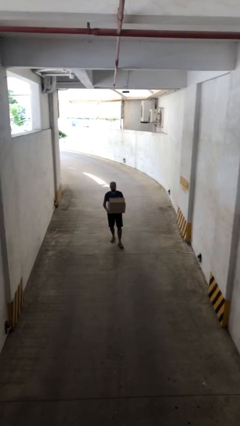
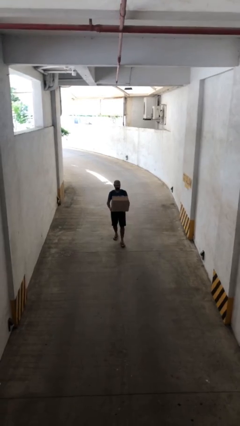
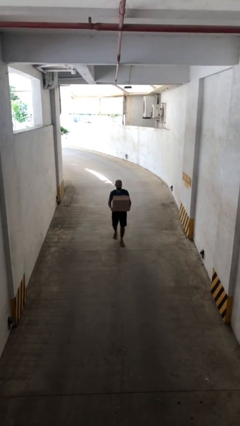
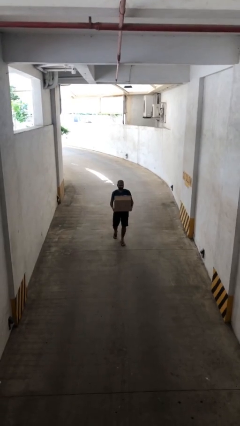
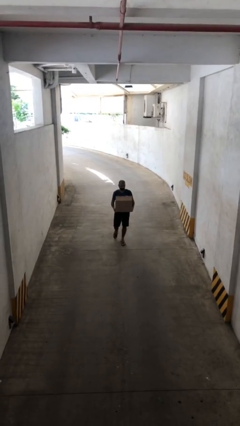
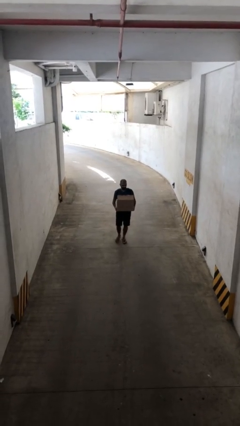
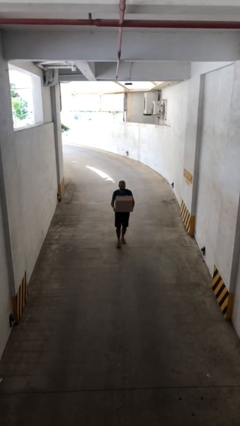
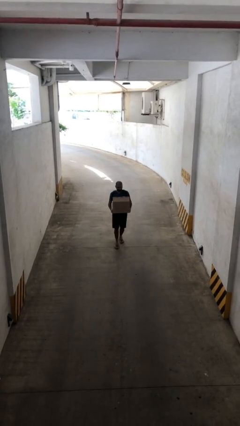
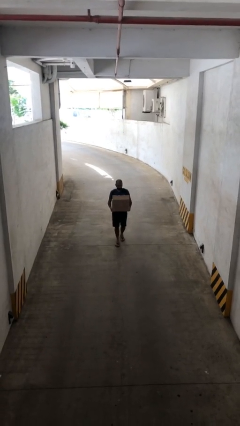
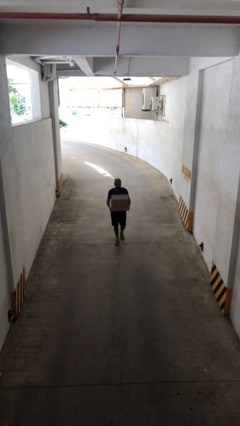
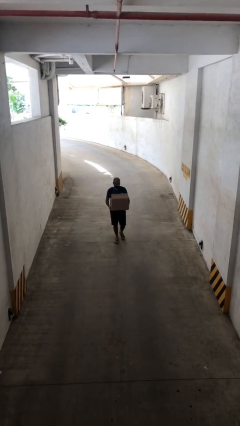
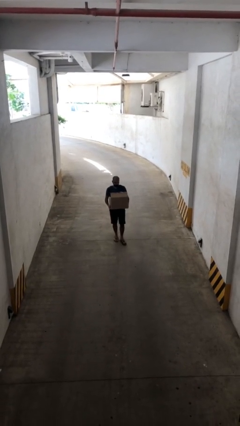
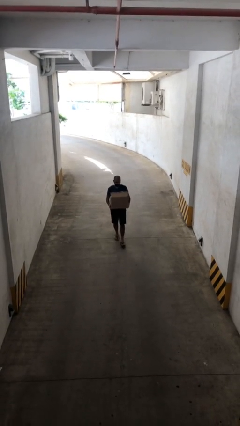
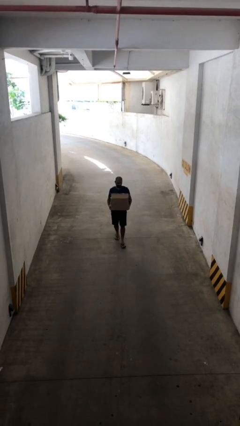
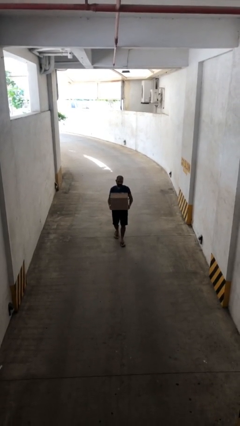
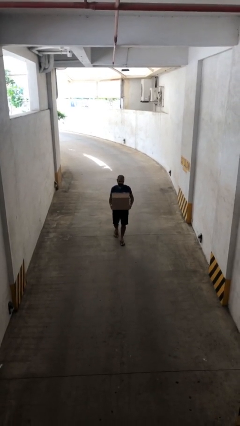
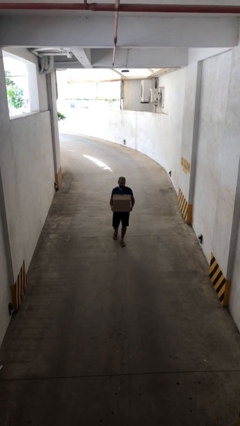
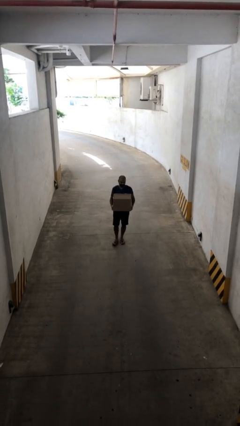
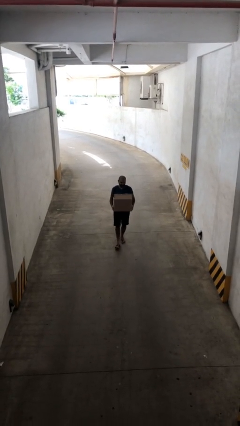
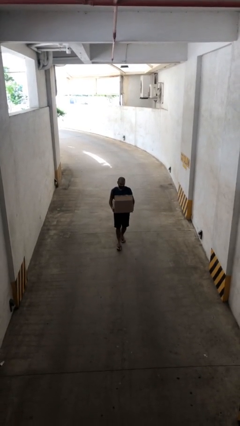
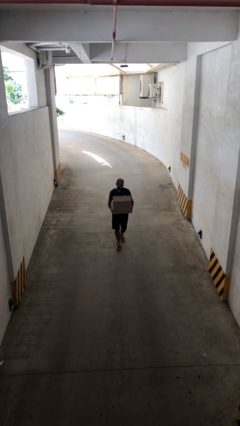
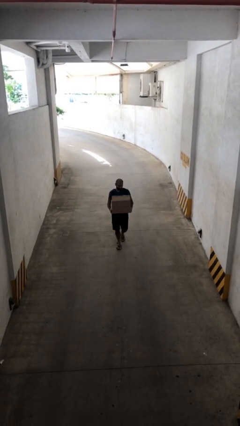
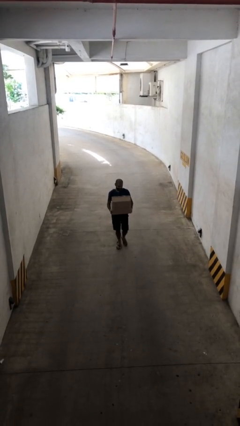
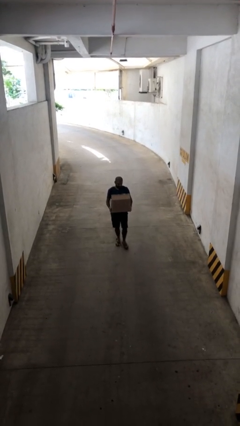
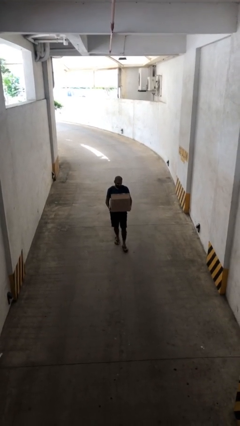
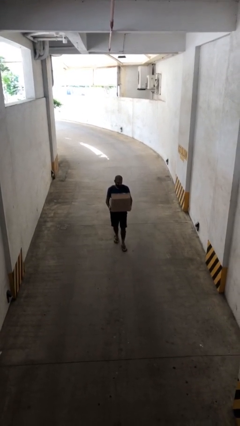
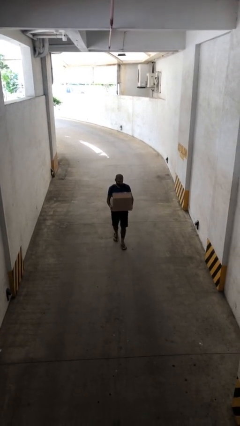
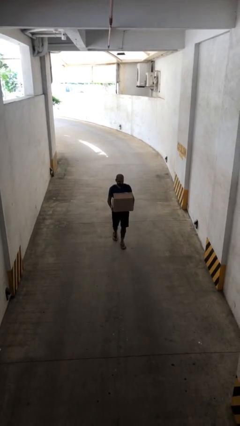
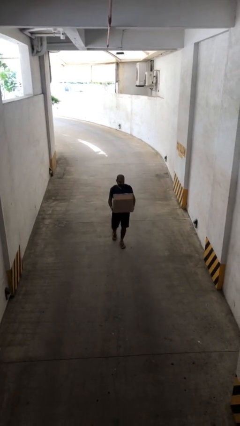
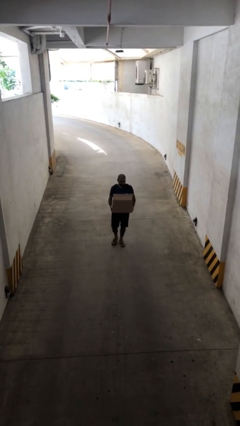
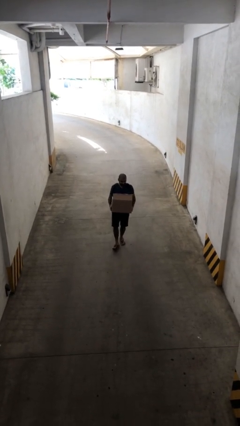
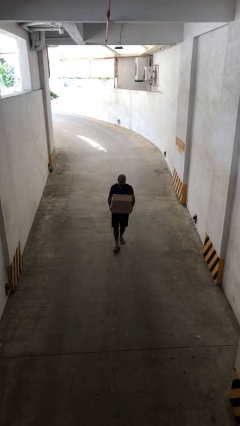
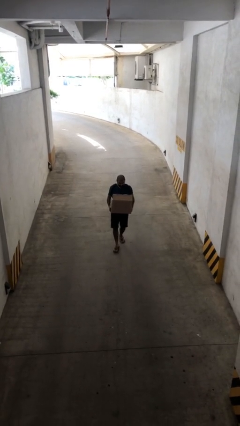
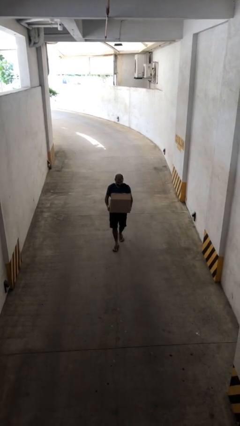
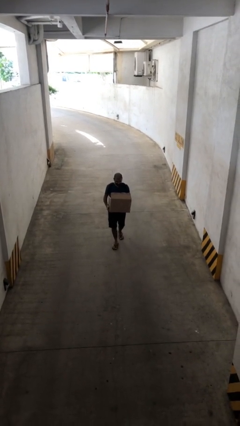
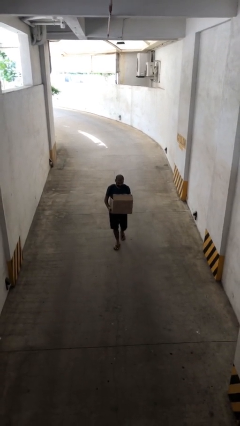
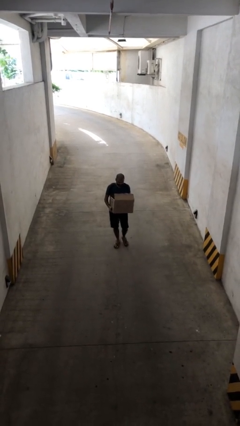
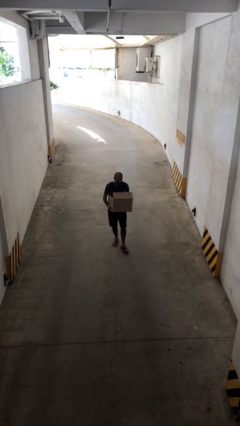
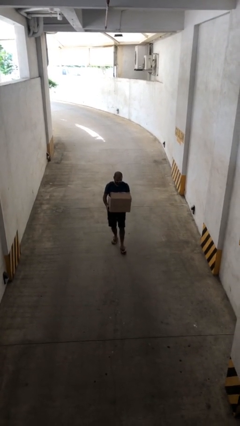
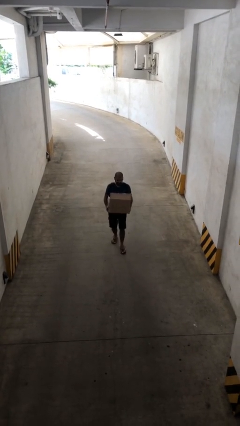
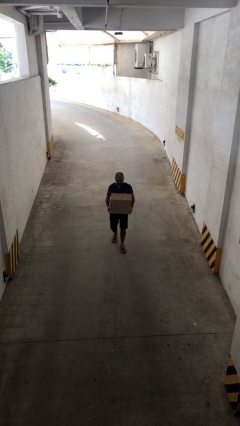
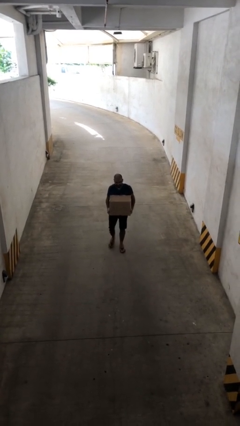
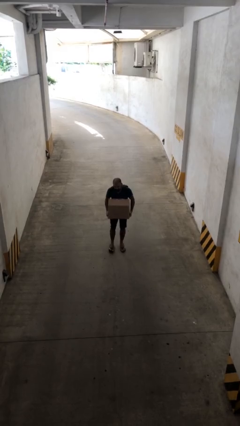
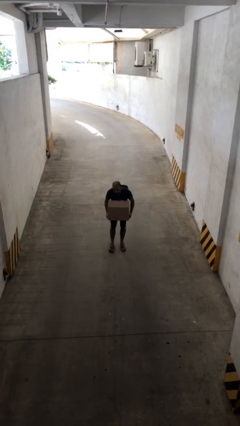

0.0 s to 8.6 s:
person carries heavy object

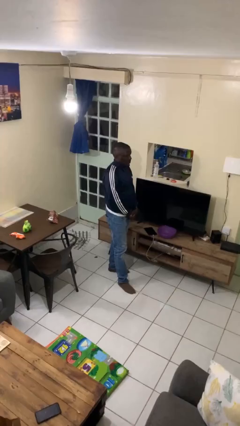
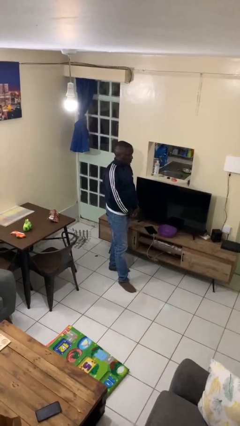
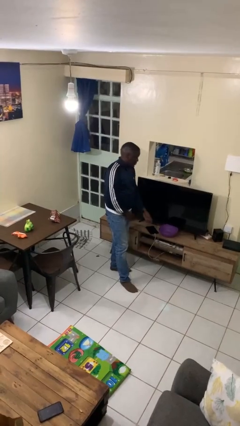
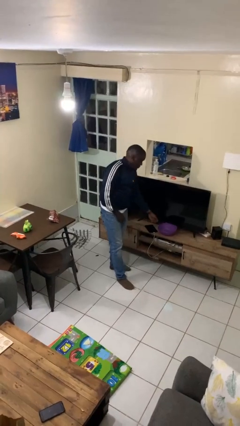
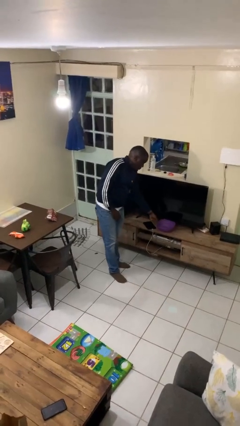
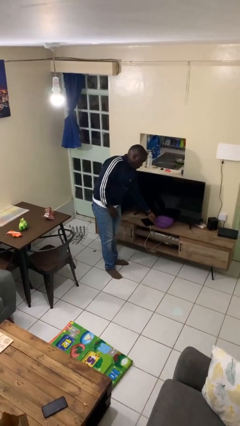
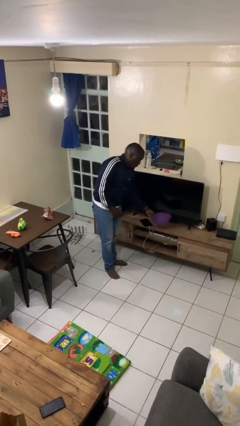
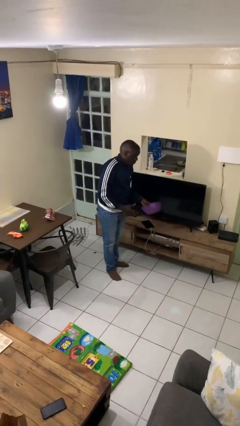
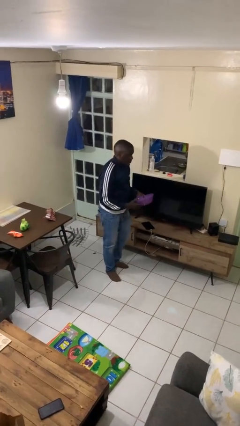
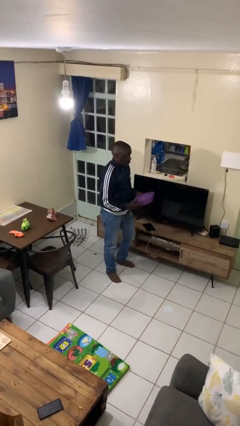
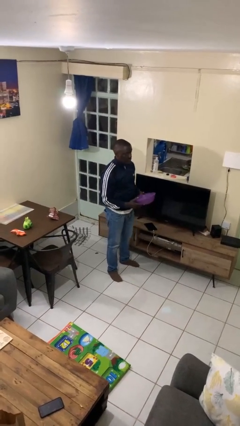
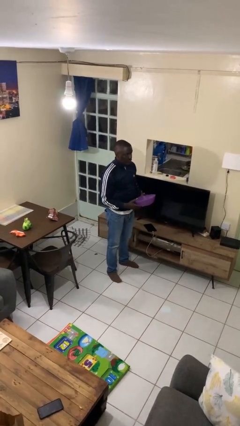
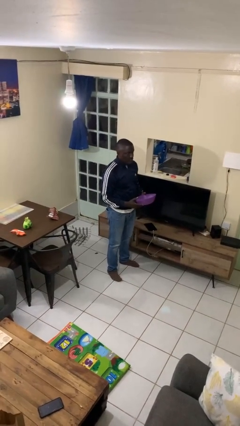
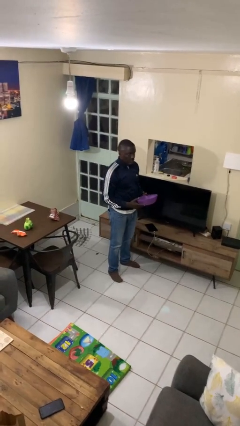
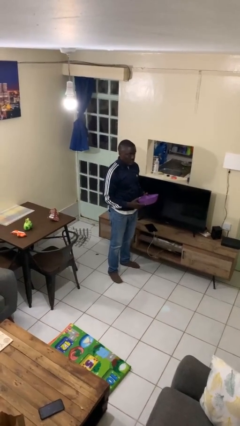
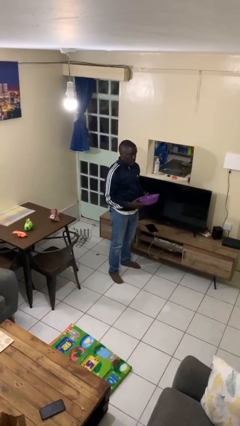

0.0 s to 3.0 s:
person picks up object from countertop

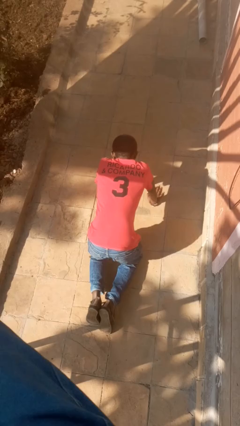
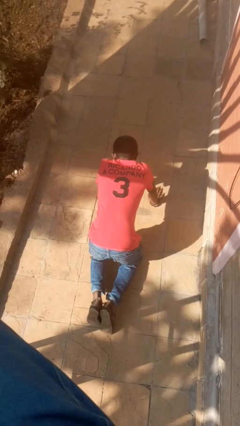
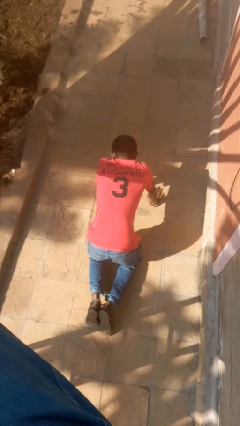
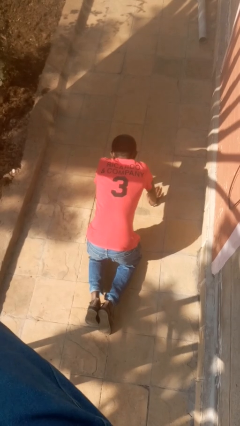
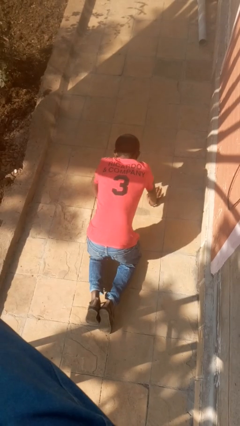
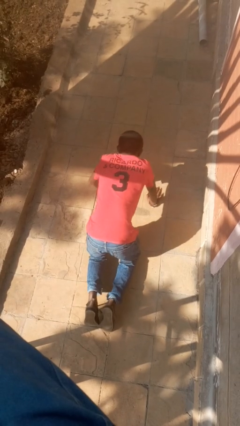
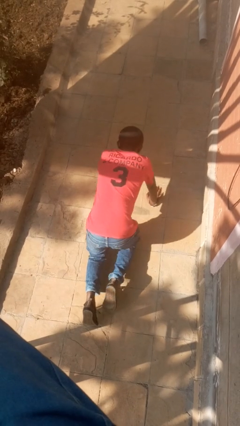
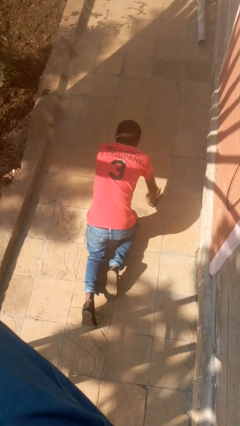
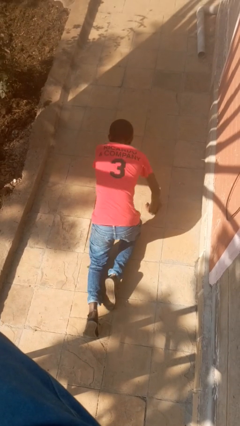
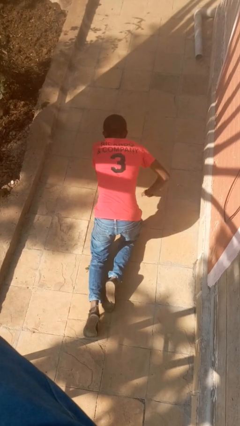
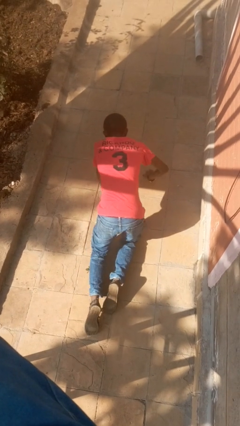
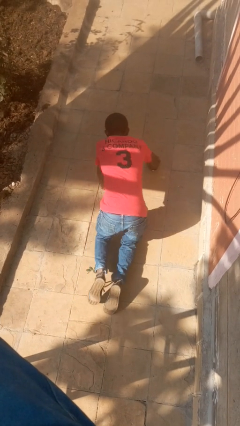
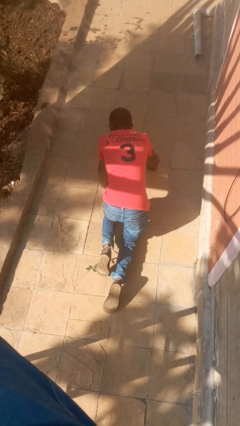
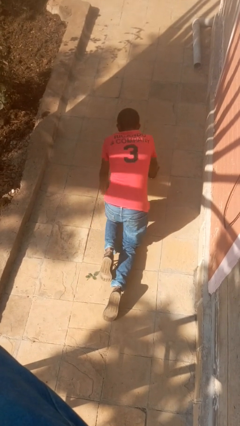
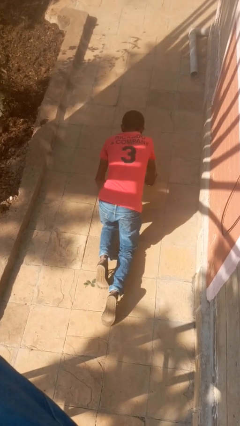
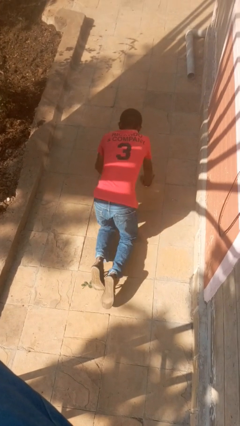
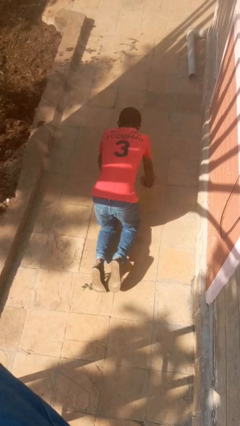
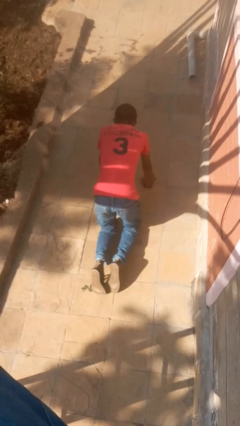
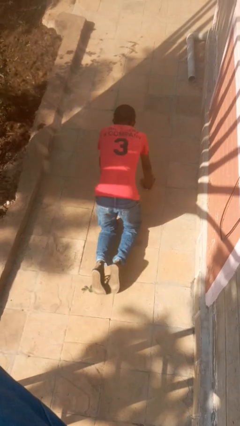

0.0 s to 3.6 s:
person crawls

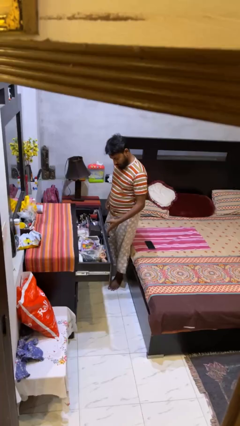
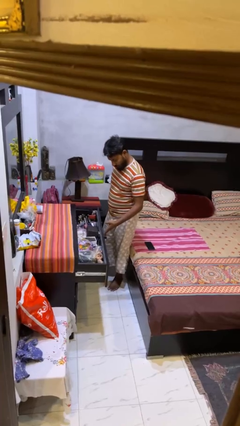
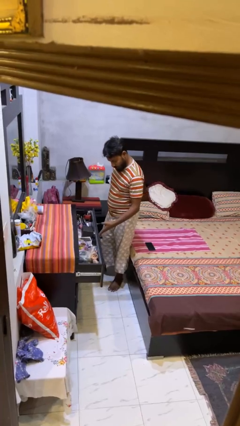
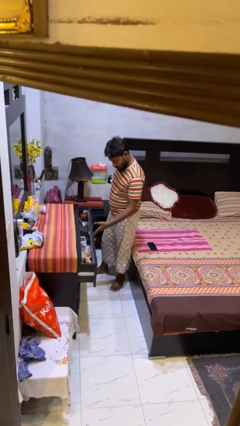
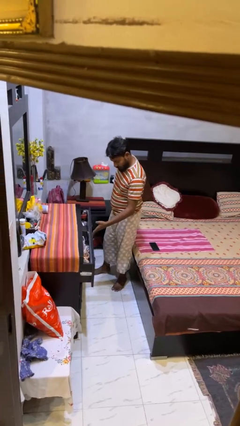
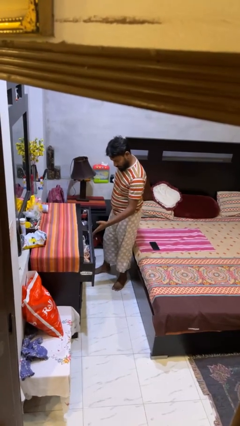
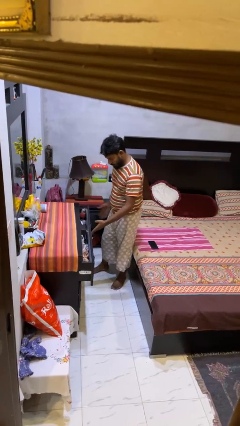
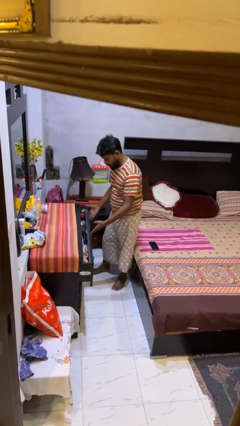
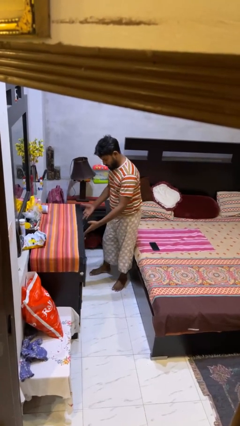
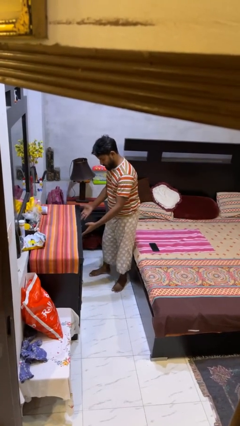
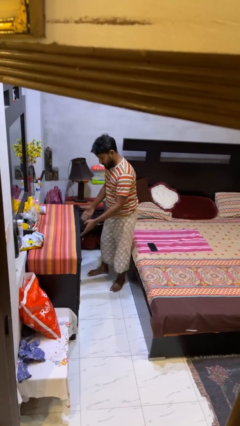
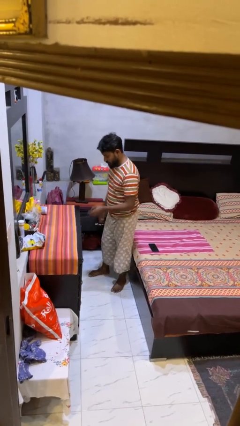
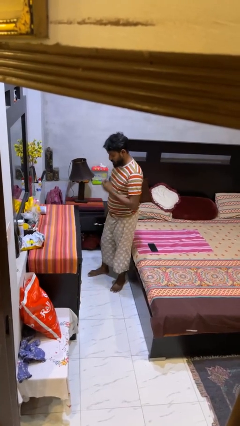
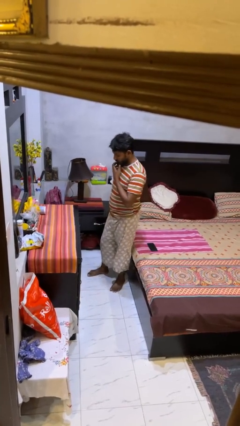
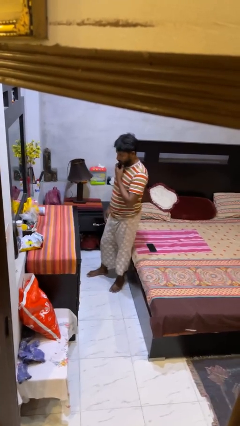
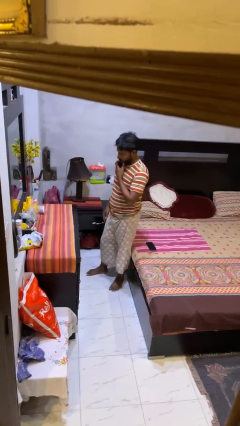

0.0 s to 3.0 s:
person closes dresser drawer
